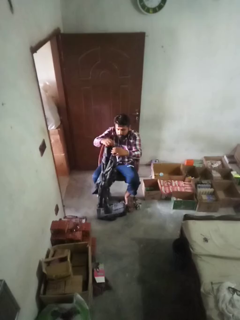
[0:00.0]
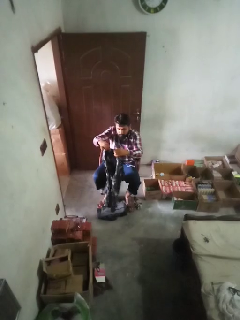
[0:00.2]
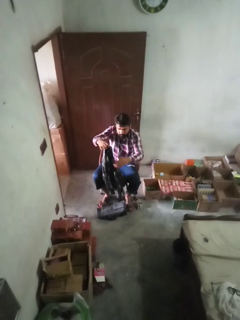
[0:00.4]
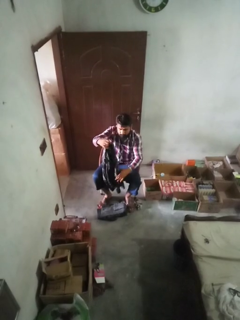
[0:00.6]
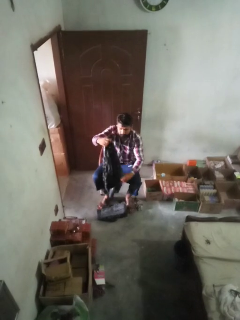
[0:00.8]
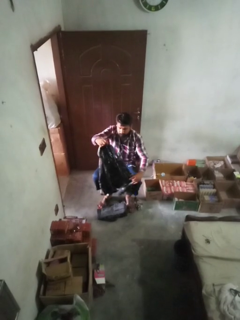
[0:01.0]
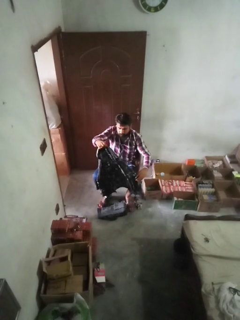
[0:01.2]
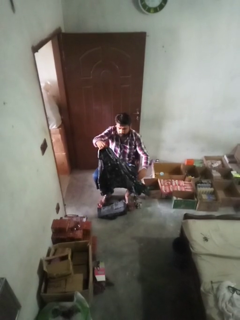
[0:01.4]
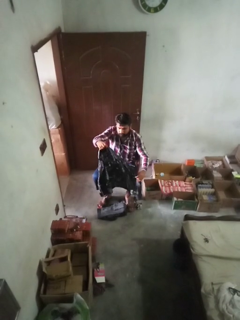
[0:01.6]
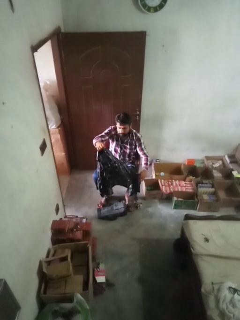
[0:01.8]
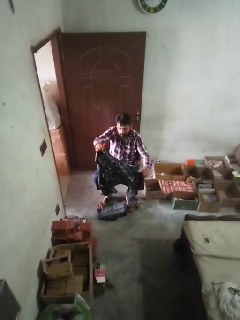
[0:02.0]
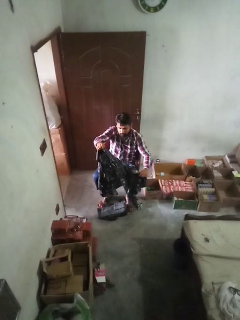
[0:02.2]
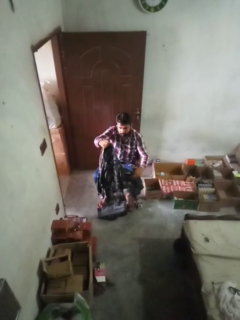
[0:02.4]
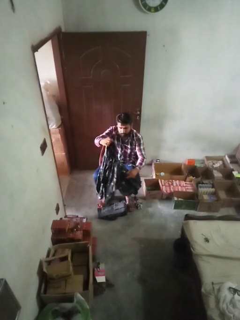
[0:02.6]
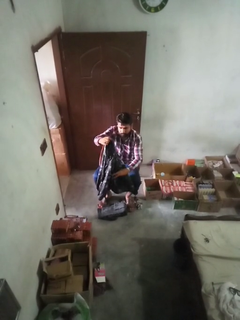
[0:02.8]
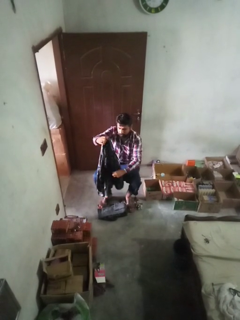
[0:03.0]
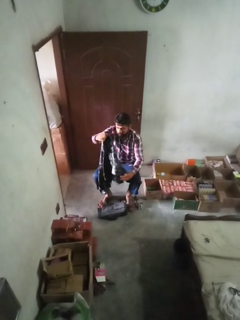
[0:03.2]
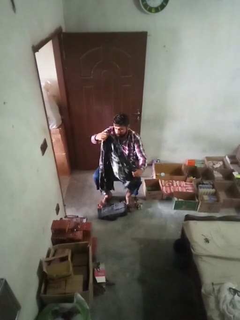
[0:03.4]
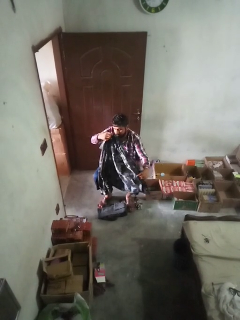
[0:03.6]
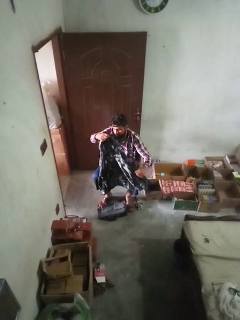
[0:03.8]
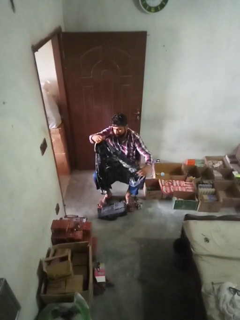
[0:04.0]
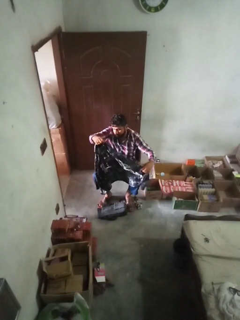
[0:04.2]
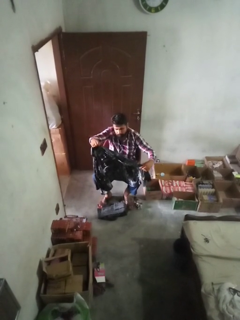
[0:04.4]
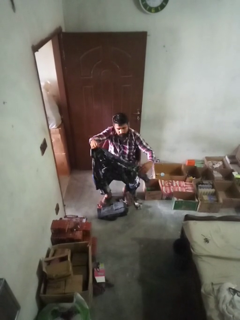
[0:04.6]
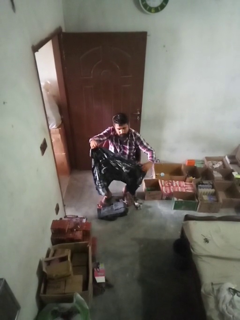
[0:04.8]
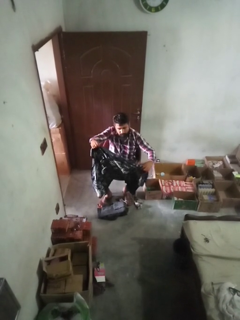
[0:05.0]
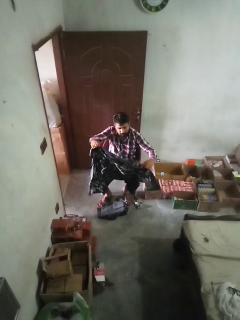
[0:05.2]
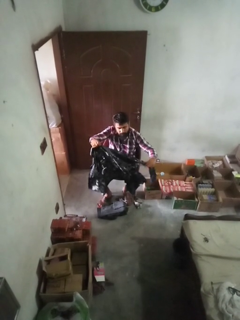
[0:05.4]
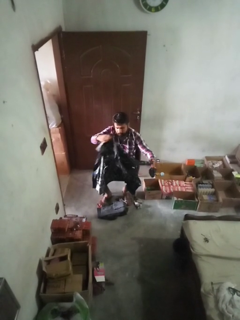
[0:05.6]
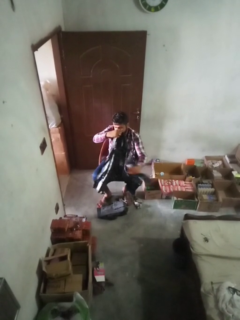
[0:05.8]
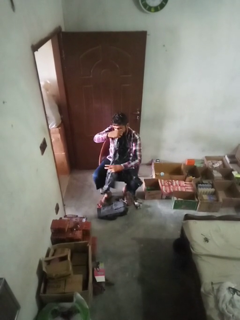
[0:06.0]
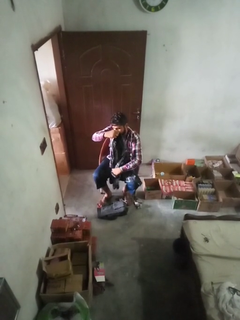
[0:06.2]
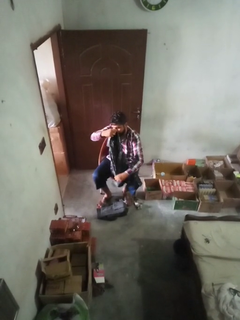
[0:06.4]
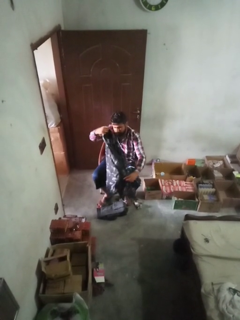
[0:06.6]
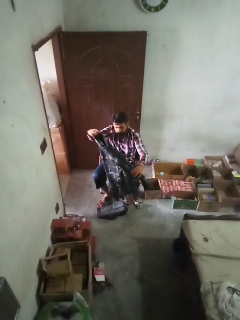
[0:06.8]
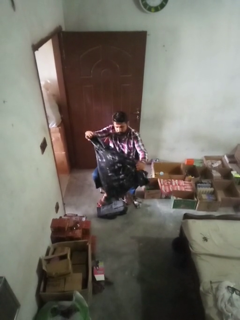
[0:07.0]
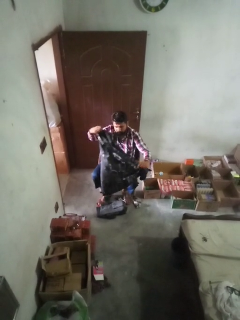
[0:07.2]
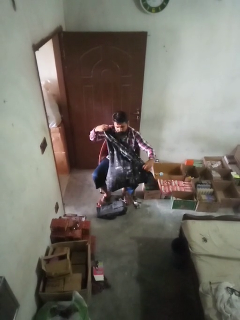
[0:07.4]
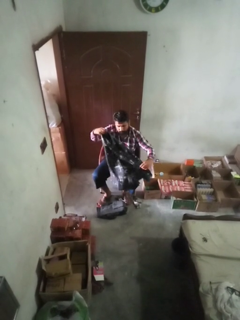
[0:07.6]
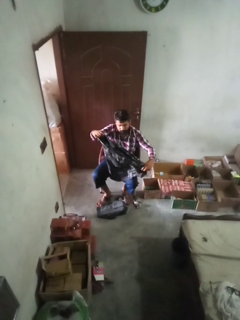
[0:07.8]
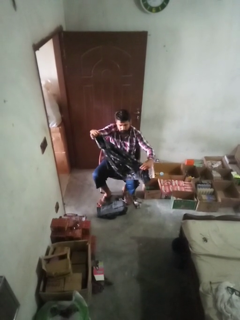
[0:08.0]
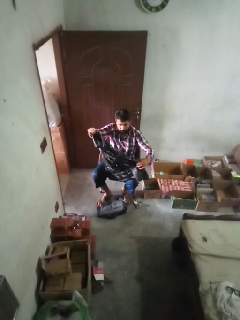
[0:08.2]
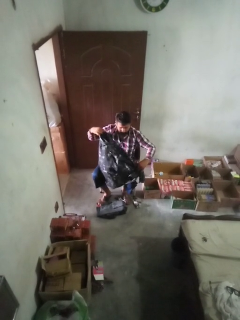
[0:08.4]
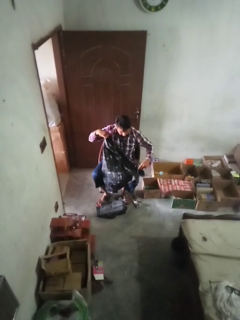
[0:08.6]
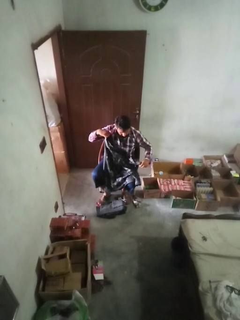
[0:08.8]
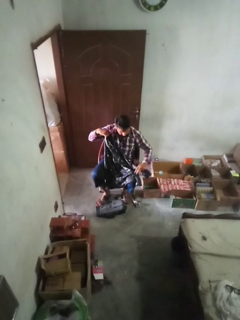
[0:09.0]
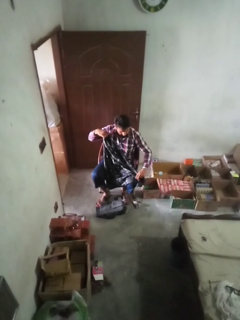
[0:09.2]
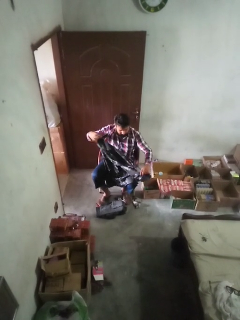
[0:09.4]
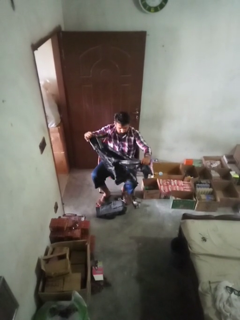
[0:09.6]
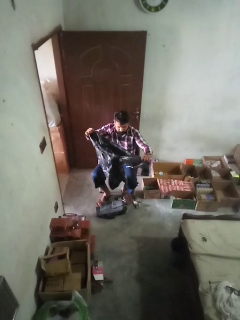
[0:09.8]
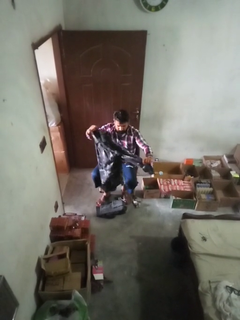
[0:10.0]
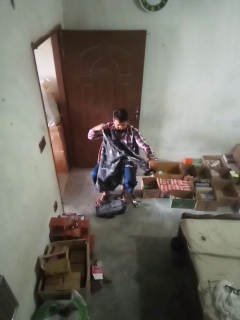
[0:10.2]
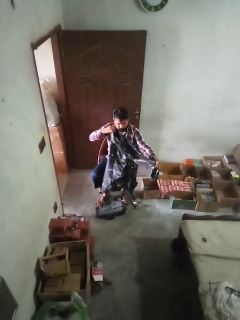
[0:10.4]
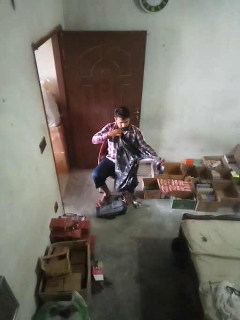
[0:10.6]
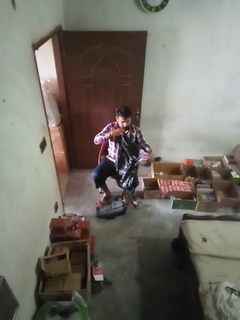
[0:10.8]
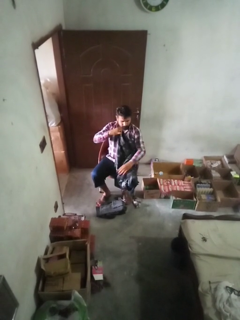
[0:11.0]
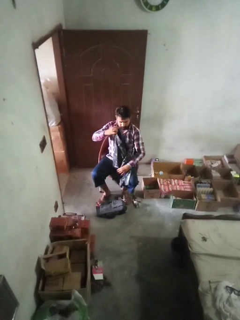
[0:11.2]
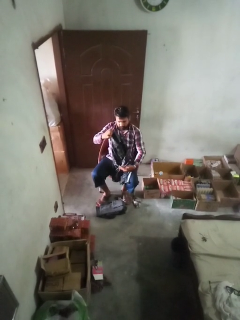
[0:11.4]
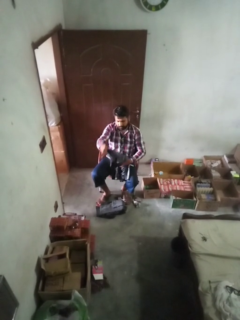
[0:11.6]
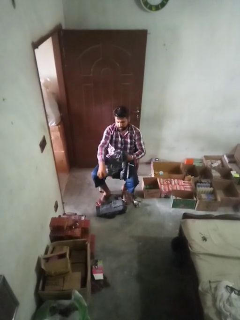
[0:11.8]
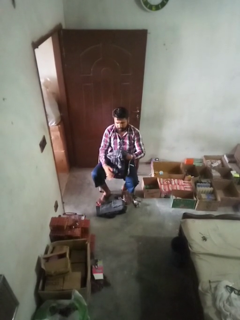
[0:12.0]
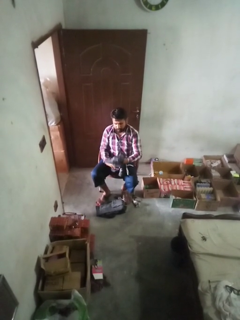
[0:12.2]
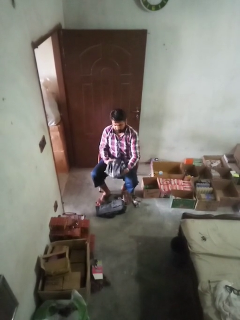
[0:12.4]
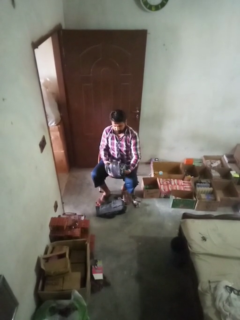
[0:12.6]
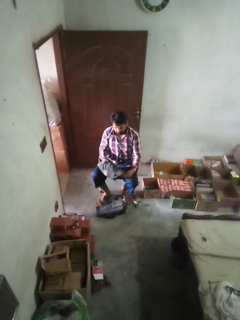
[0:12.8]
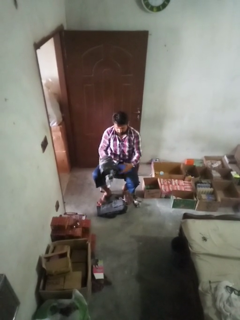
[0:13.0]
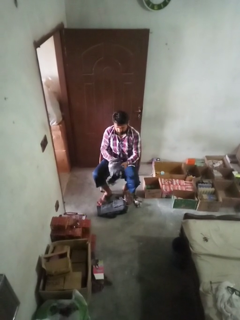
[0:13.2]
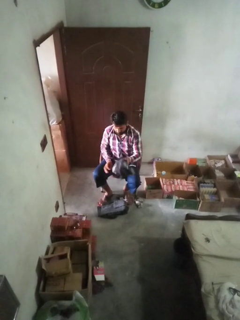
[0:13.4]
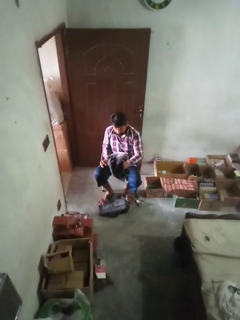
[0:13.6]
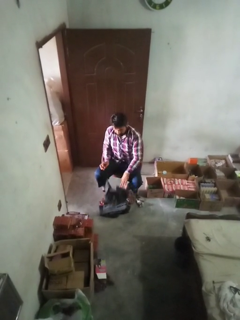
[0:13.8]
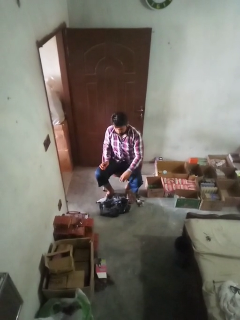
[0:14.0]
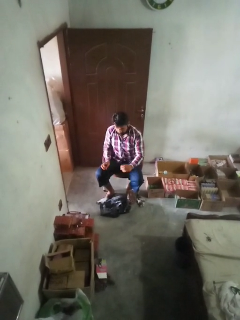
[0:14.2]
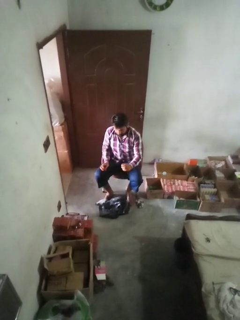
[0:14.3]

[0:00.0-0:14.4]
person folds shirt

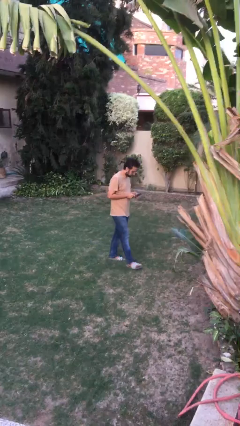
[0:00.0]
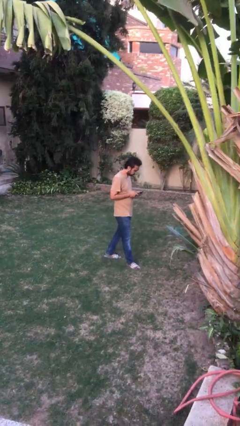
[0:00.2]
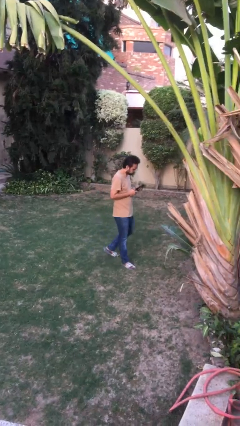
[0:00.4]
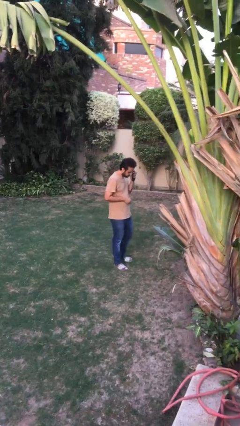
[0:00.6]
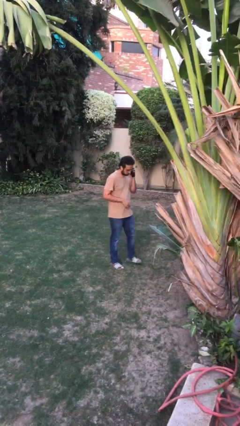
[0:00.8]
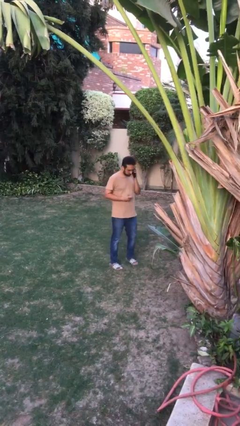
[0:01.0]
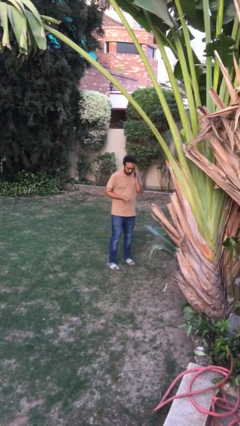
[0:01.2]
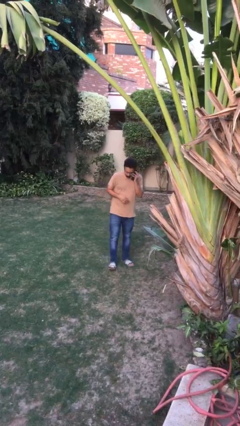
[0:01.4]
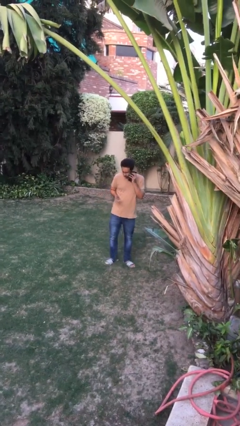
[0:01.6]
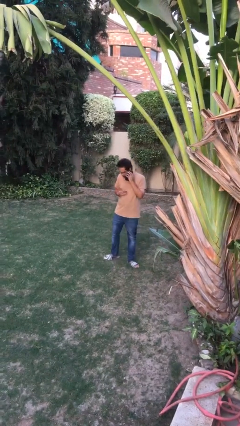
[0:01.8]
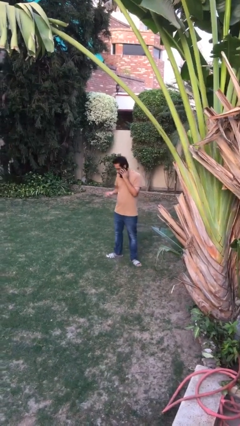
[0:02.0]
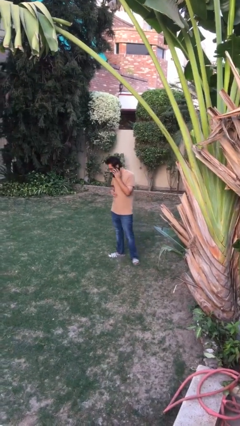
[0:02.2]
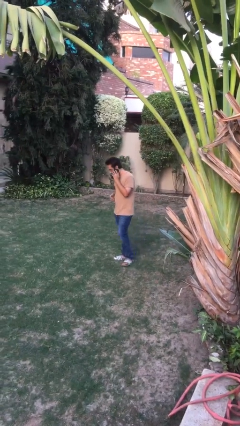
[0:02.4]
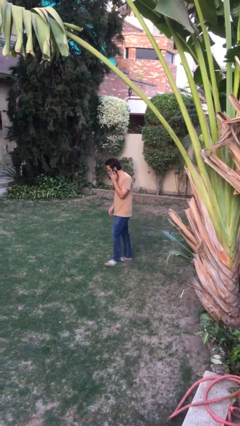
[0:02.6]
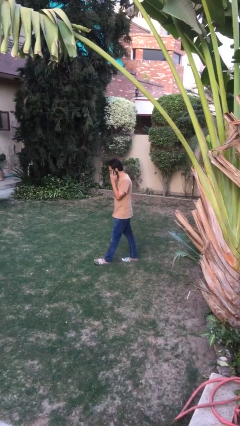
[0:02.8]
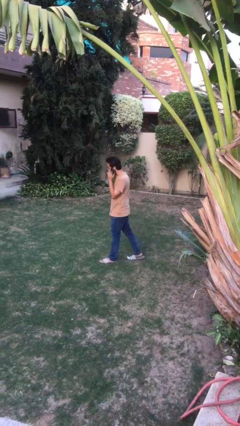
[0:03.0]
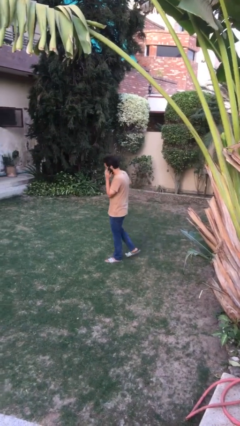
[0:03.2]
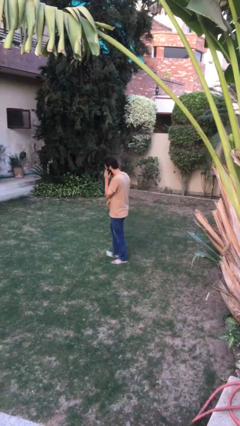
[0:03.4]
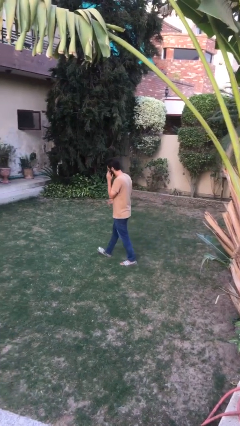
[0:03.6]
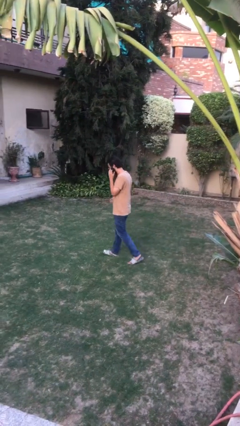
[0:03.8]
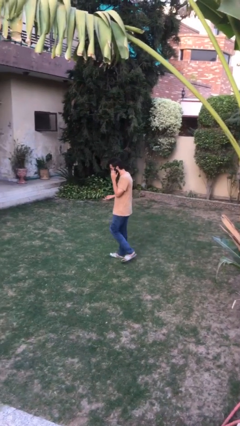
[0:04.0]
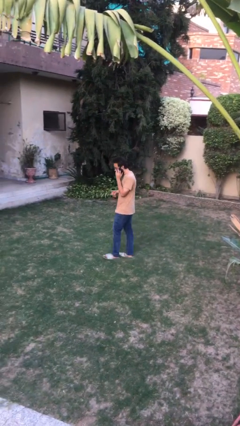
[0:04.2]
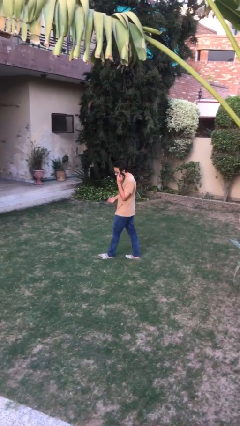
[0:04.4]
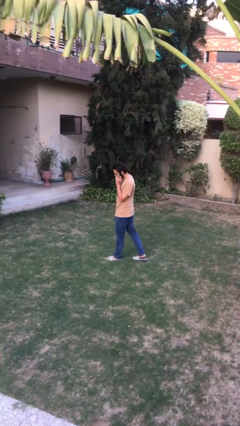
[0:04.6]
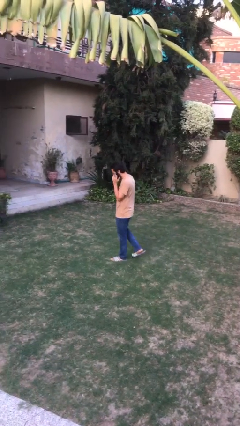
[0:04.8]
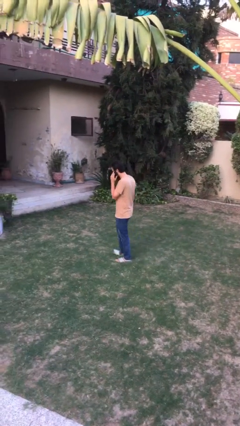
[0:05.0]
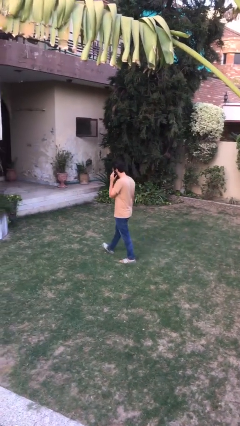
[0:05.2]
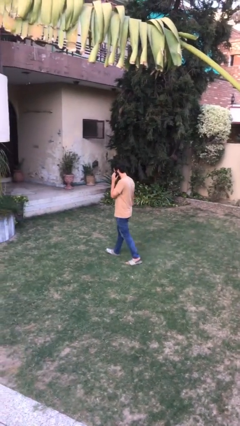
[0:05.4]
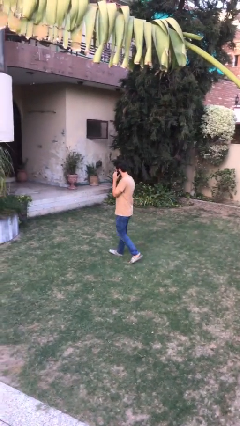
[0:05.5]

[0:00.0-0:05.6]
person talks on phone

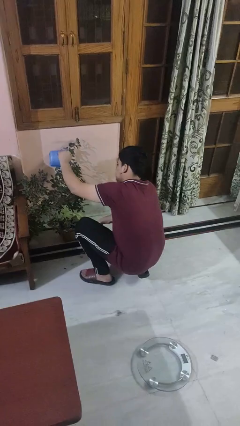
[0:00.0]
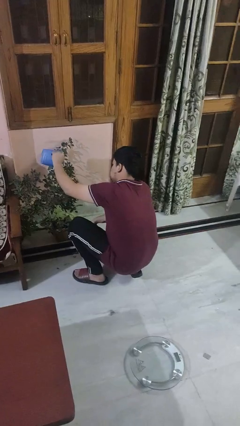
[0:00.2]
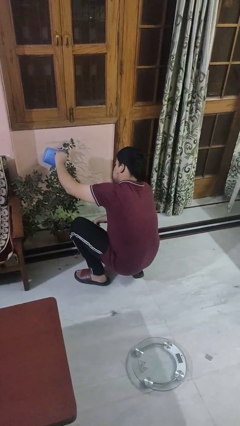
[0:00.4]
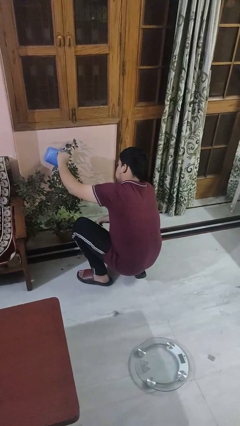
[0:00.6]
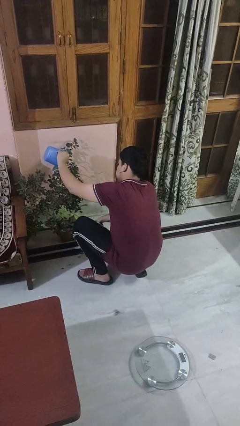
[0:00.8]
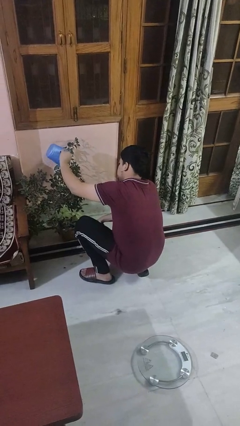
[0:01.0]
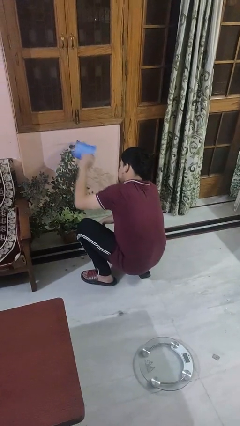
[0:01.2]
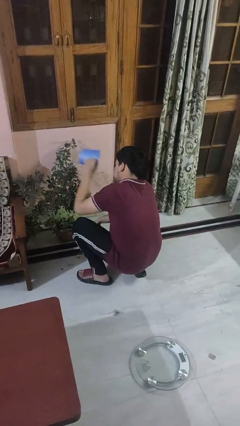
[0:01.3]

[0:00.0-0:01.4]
person waters houseplant

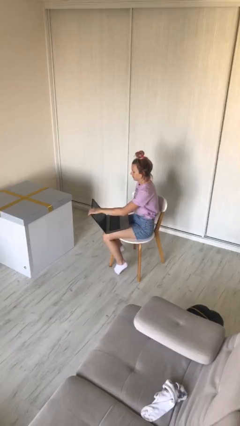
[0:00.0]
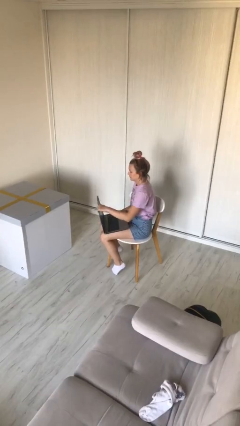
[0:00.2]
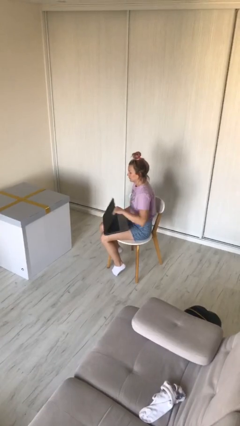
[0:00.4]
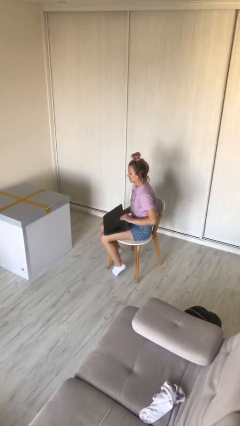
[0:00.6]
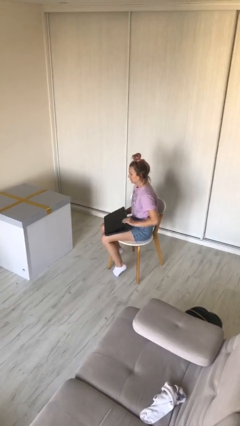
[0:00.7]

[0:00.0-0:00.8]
person closes laptop
